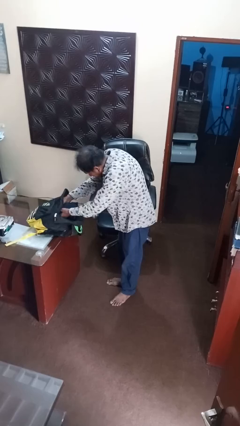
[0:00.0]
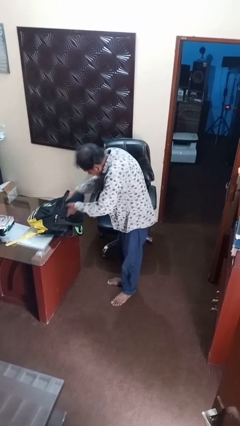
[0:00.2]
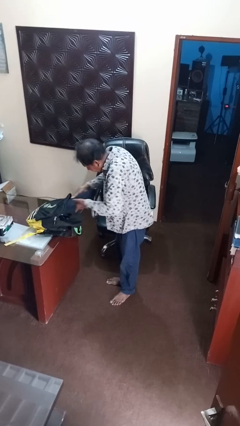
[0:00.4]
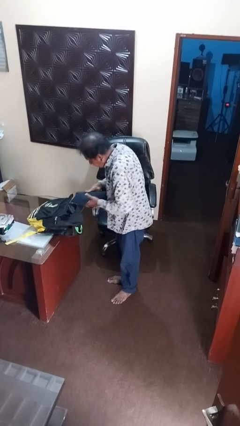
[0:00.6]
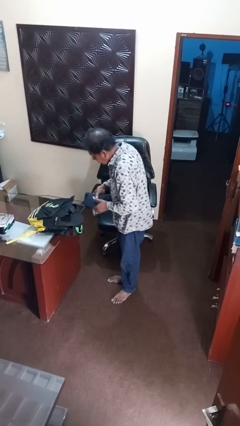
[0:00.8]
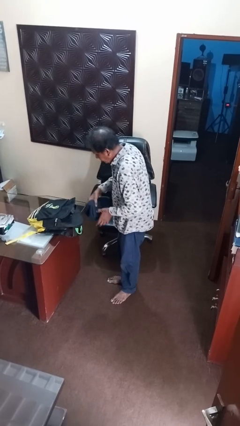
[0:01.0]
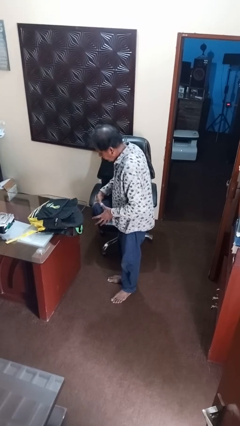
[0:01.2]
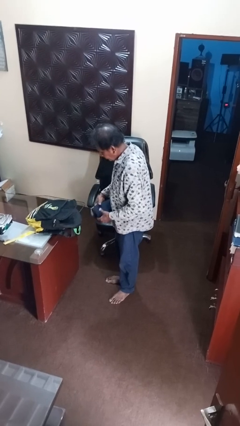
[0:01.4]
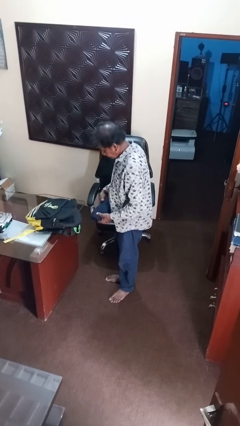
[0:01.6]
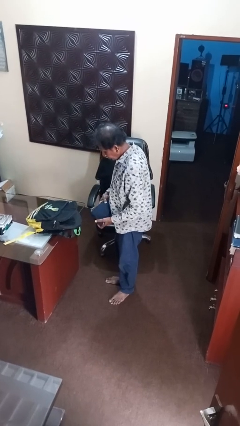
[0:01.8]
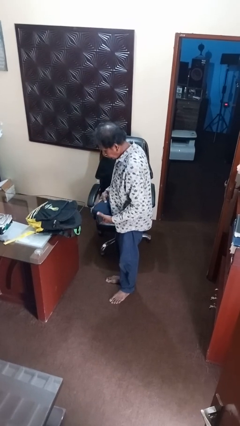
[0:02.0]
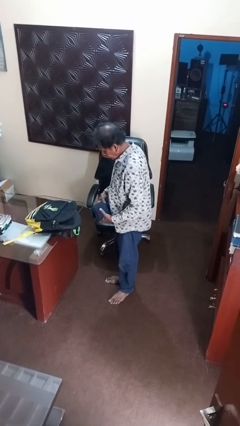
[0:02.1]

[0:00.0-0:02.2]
person takes object from backpack

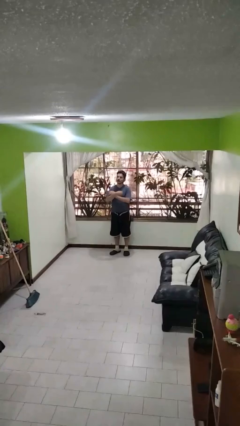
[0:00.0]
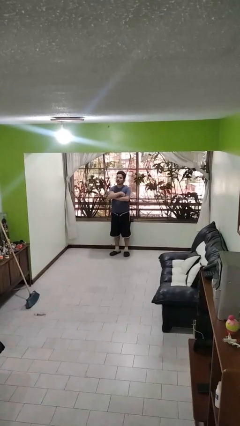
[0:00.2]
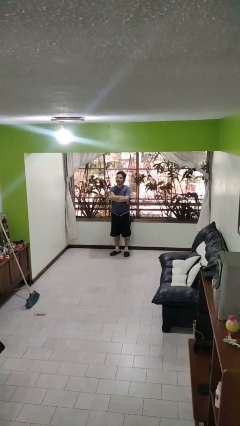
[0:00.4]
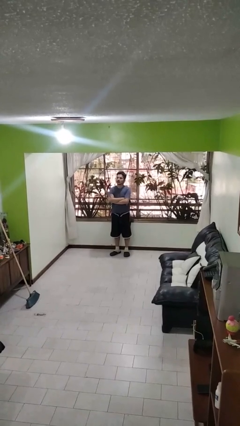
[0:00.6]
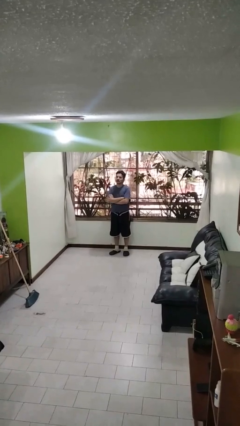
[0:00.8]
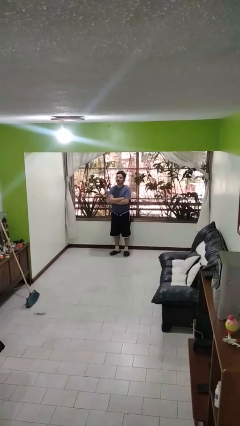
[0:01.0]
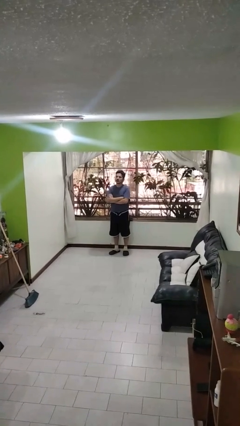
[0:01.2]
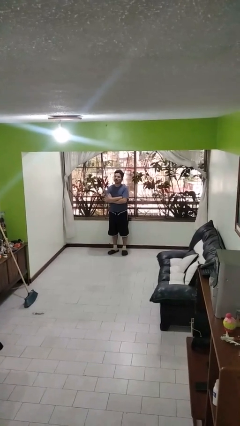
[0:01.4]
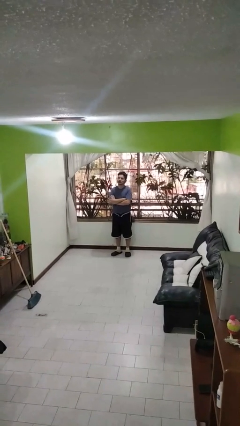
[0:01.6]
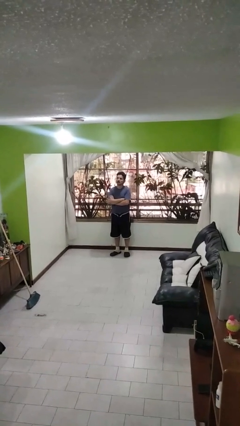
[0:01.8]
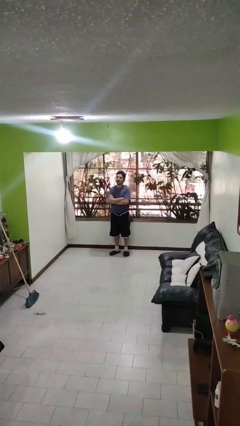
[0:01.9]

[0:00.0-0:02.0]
person crosses arms

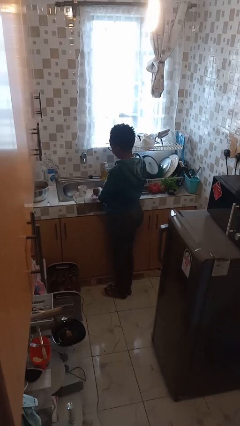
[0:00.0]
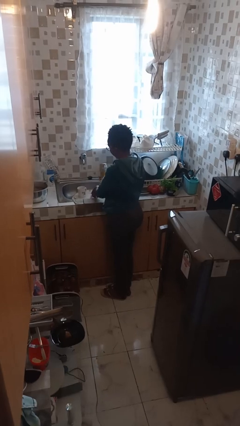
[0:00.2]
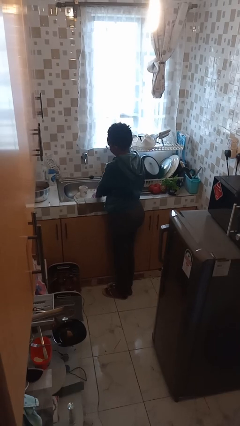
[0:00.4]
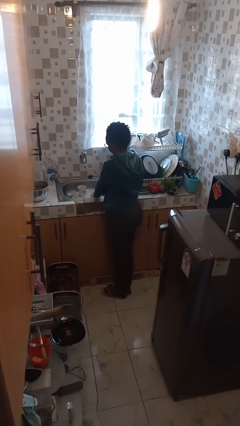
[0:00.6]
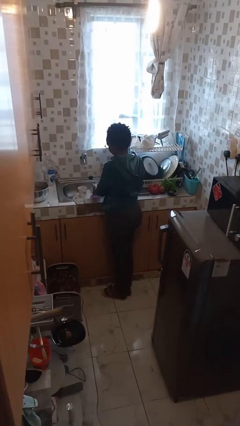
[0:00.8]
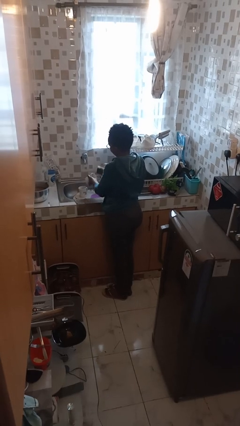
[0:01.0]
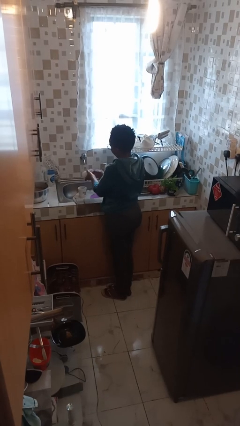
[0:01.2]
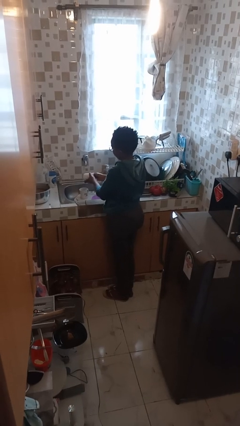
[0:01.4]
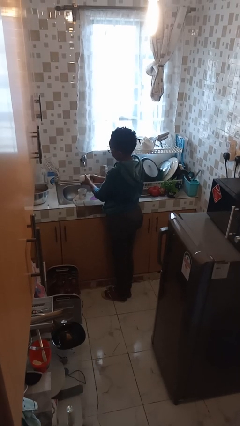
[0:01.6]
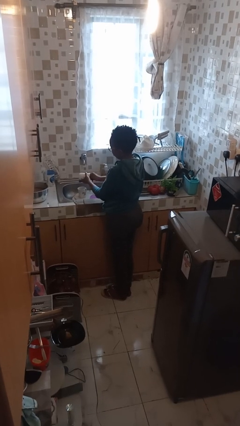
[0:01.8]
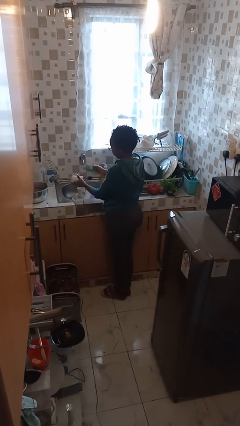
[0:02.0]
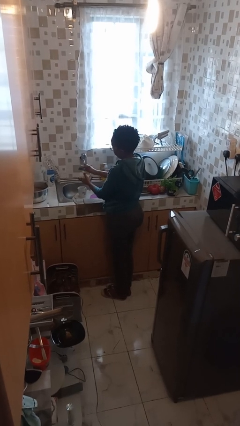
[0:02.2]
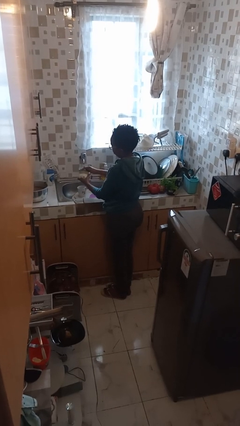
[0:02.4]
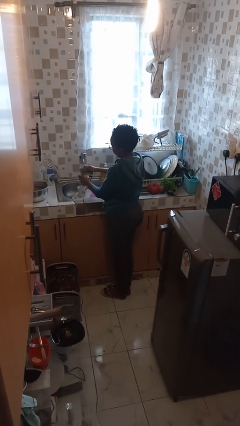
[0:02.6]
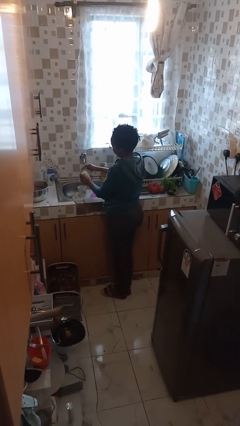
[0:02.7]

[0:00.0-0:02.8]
person washes dish

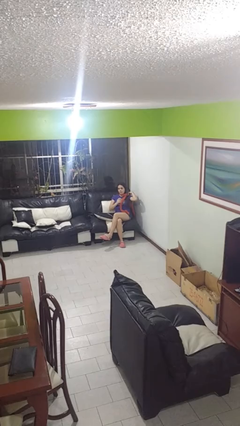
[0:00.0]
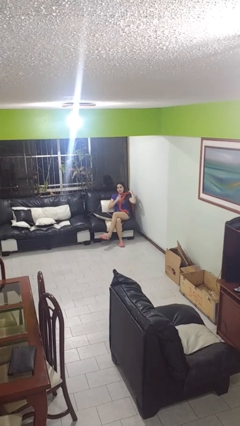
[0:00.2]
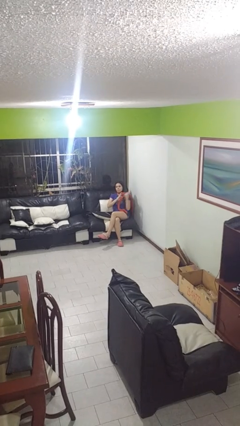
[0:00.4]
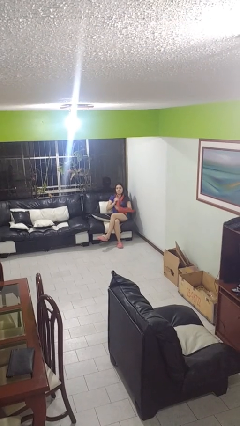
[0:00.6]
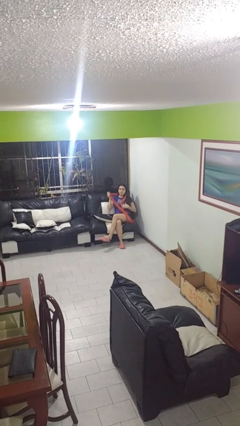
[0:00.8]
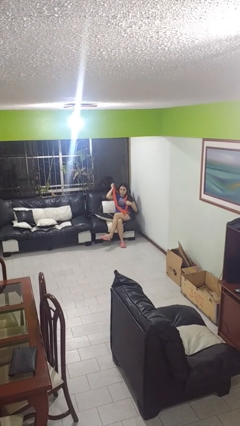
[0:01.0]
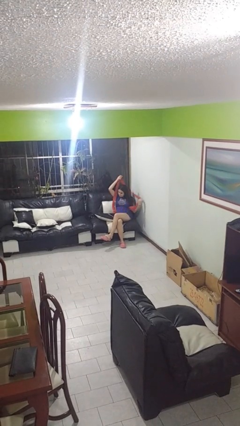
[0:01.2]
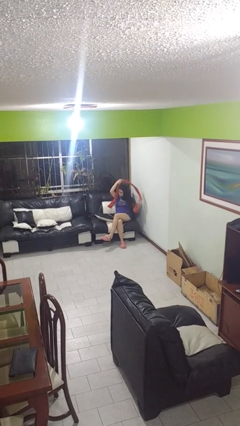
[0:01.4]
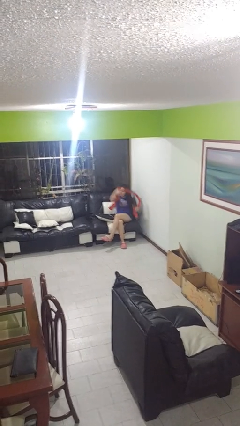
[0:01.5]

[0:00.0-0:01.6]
person takes off scarf

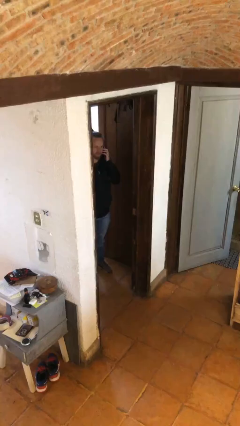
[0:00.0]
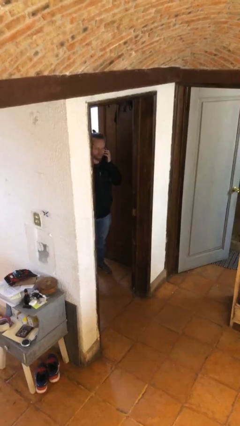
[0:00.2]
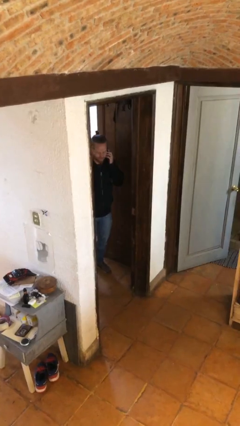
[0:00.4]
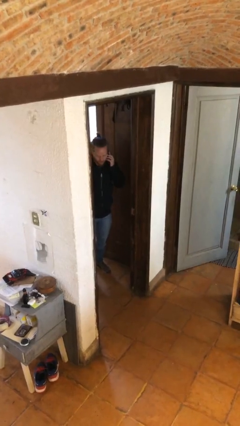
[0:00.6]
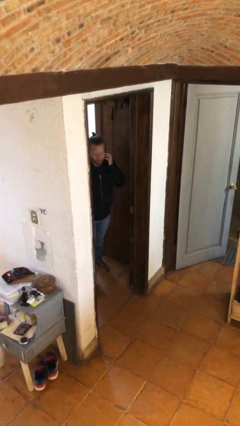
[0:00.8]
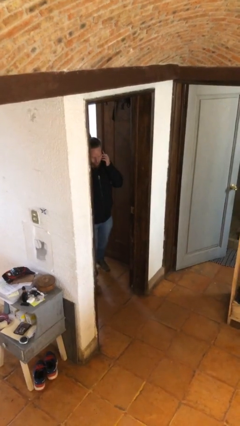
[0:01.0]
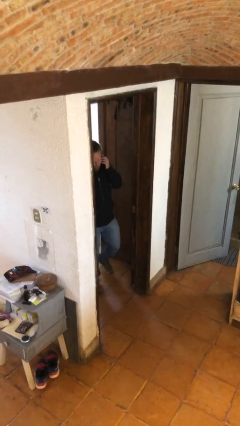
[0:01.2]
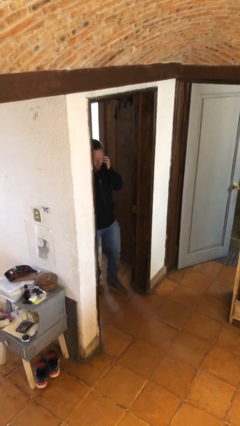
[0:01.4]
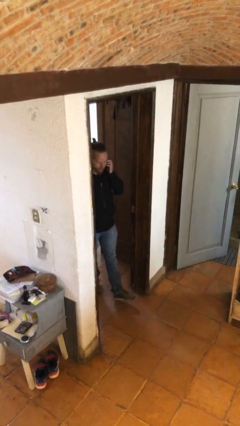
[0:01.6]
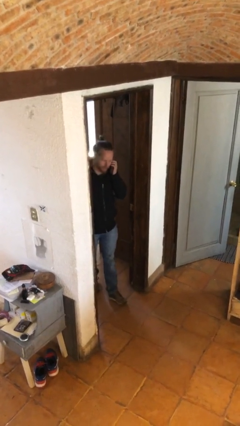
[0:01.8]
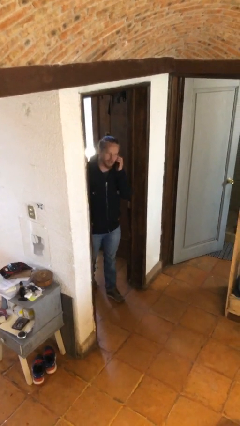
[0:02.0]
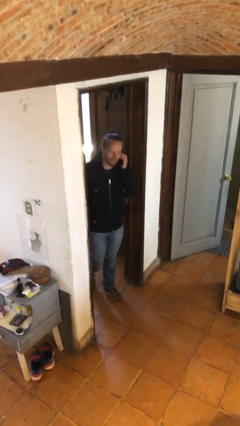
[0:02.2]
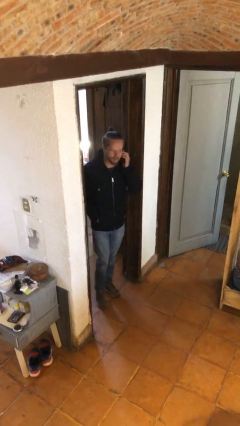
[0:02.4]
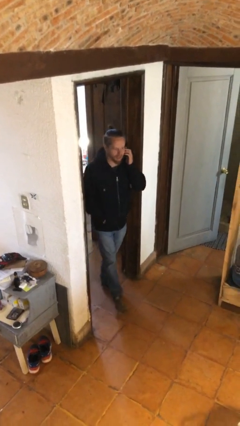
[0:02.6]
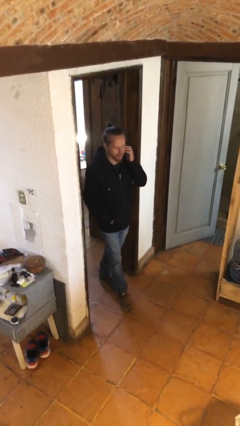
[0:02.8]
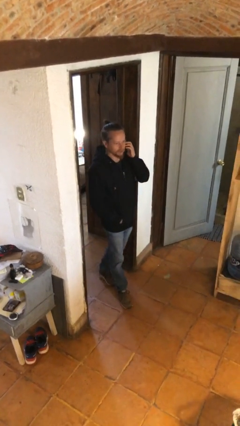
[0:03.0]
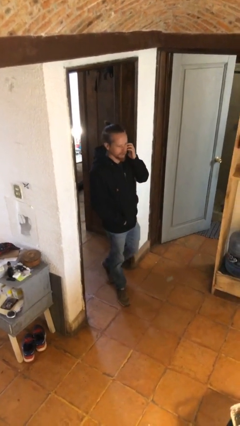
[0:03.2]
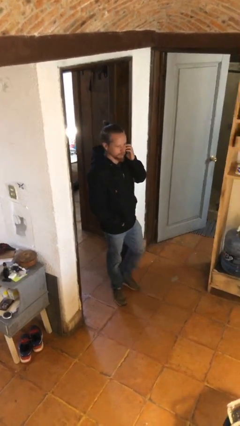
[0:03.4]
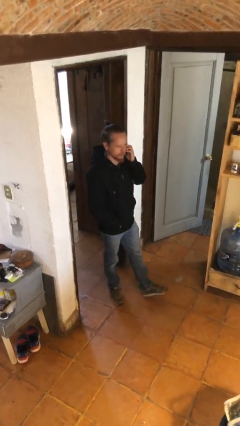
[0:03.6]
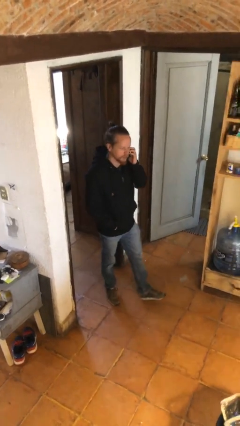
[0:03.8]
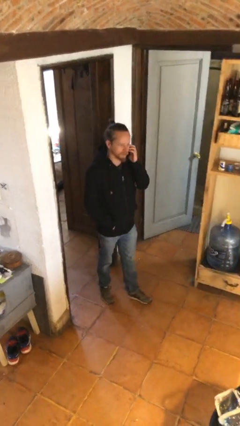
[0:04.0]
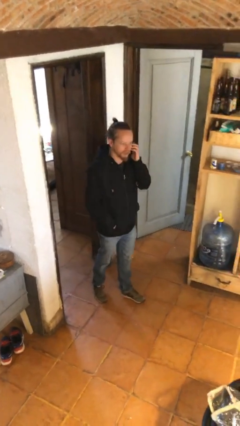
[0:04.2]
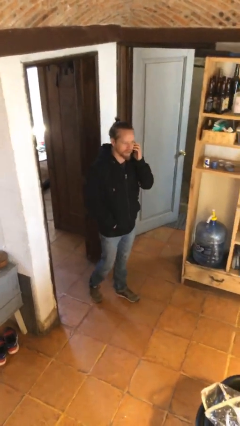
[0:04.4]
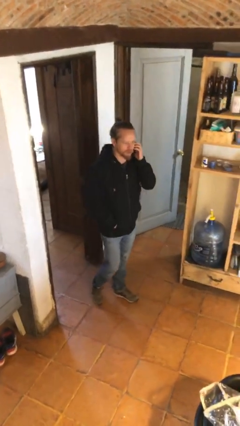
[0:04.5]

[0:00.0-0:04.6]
person enters scene through structure

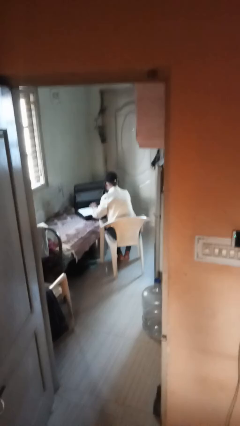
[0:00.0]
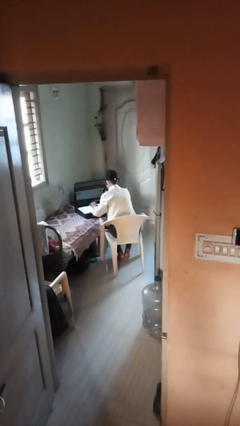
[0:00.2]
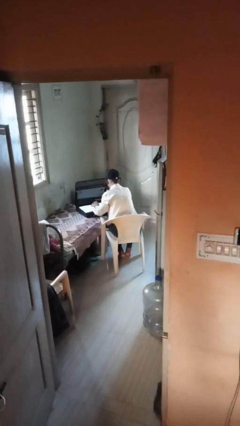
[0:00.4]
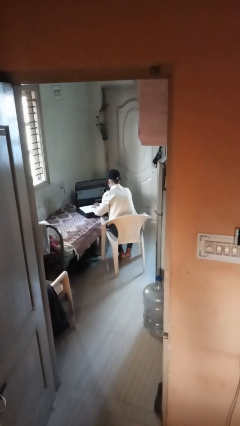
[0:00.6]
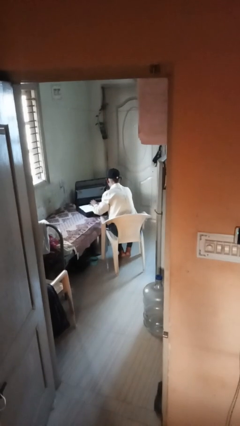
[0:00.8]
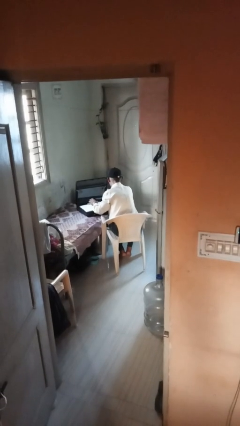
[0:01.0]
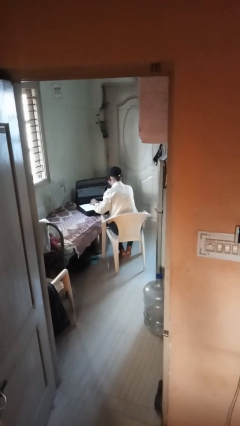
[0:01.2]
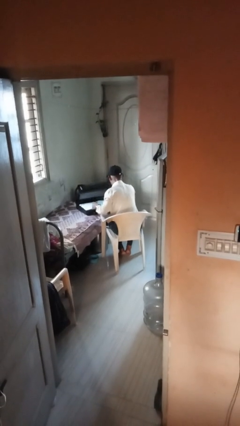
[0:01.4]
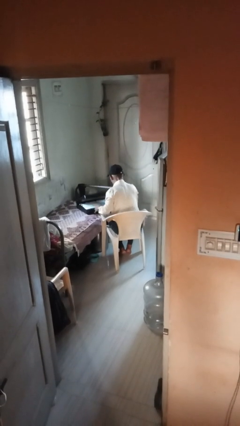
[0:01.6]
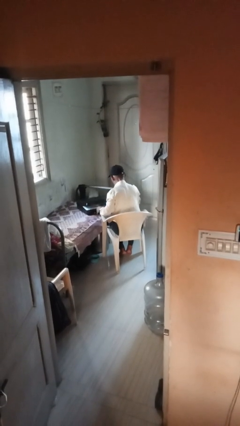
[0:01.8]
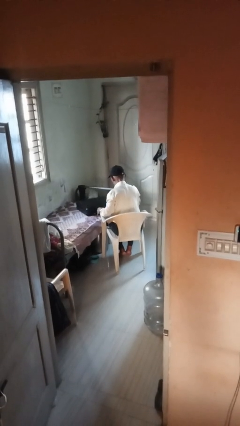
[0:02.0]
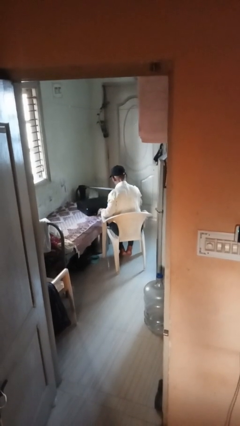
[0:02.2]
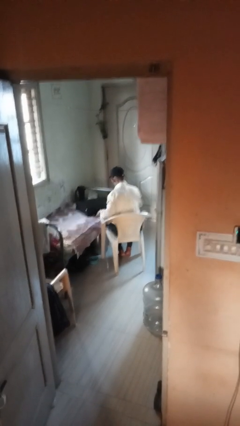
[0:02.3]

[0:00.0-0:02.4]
person closes suitcase

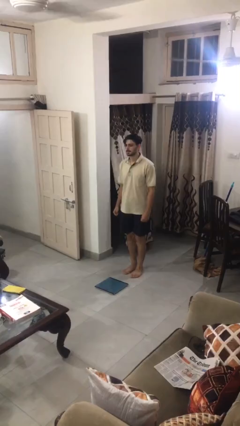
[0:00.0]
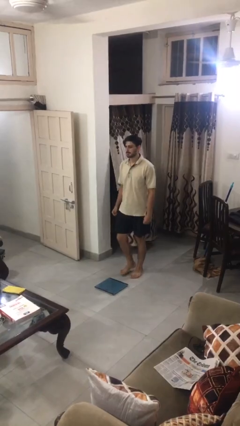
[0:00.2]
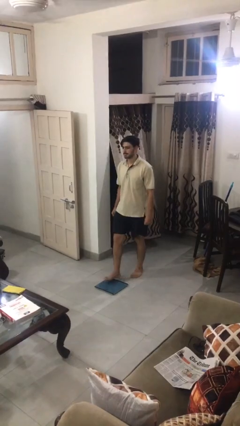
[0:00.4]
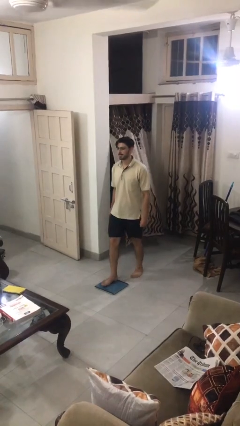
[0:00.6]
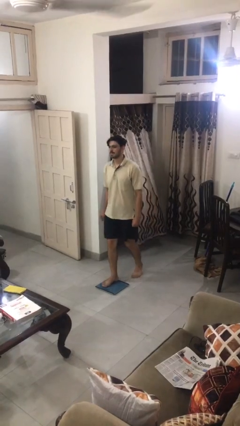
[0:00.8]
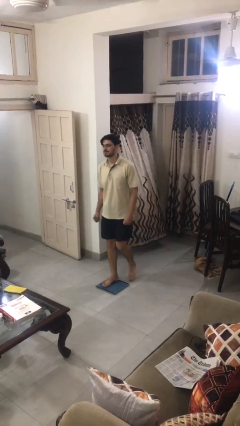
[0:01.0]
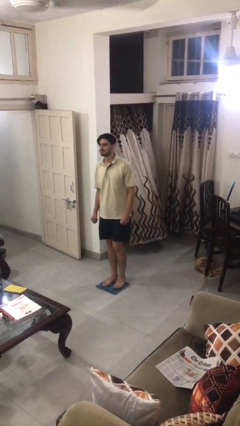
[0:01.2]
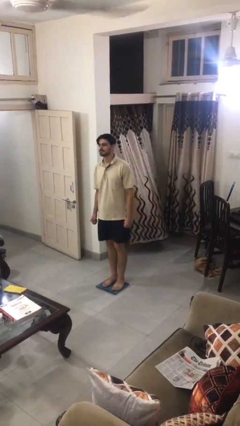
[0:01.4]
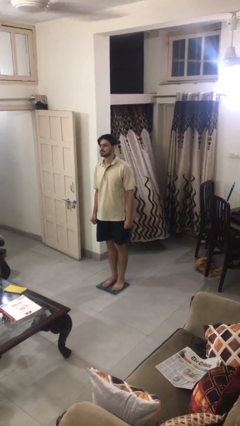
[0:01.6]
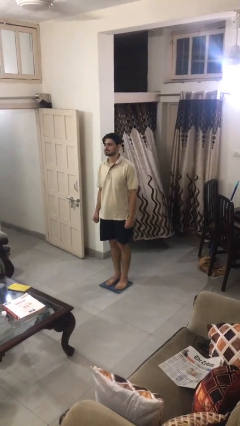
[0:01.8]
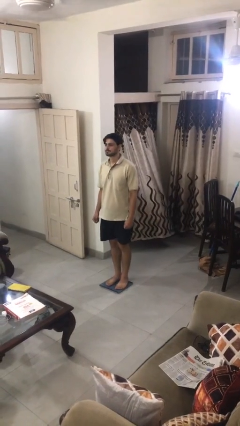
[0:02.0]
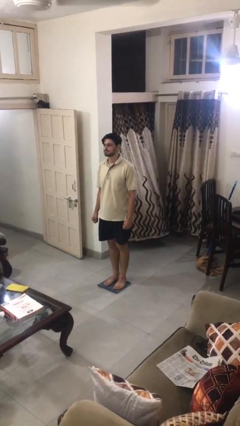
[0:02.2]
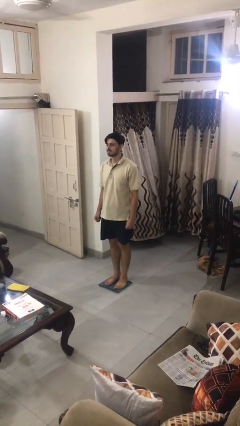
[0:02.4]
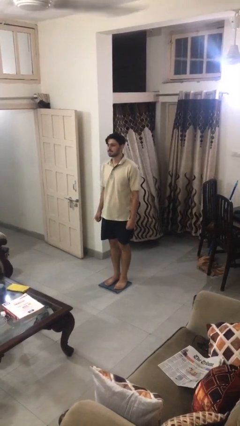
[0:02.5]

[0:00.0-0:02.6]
person uses bodyweight scale
